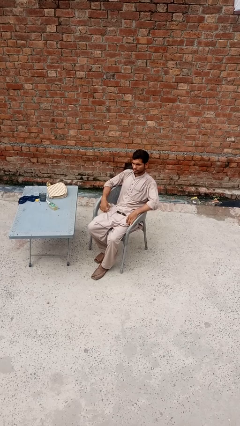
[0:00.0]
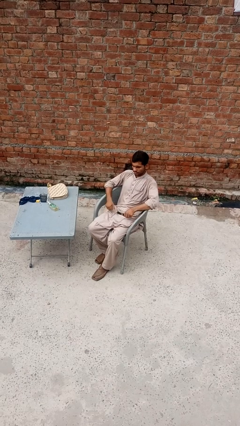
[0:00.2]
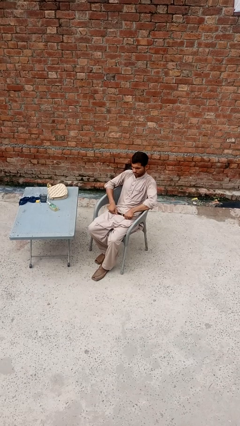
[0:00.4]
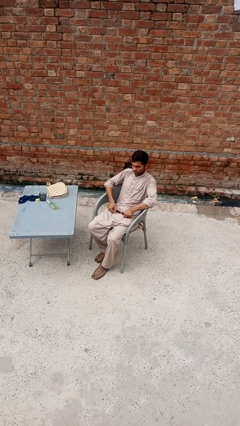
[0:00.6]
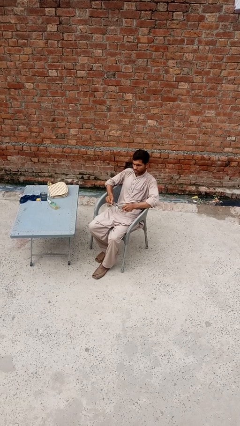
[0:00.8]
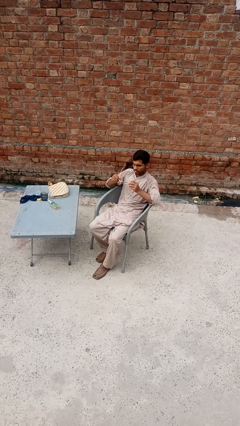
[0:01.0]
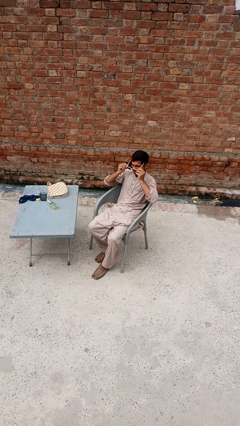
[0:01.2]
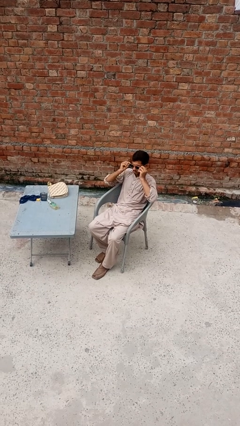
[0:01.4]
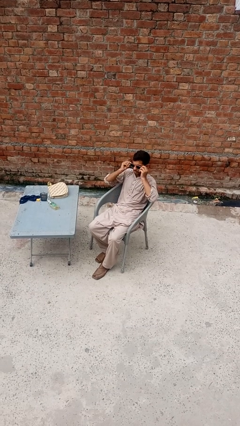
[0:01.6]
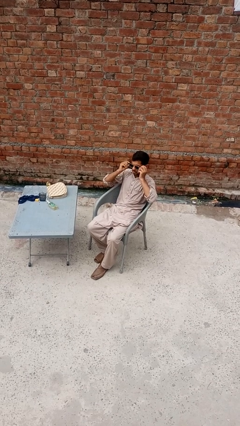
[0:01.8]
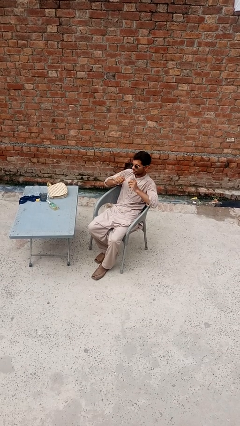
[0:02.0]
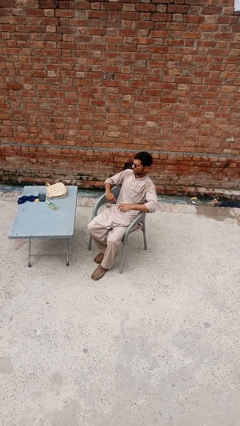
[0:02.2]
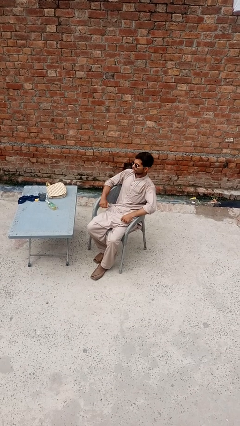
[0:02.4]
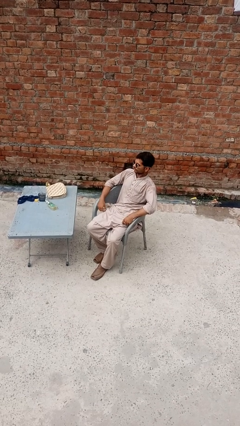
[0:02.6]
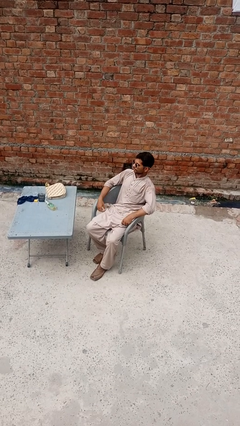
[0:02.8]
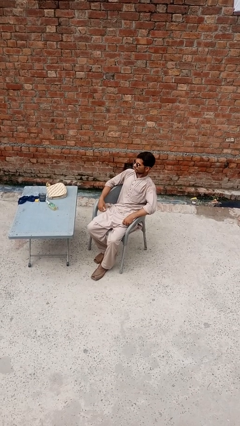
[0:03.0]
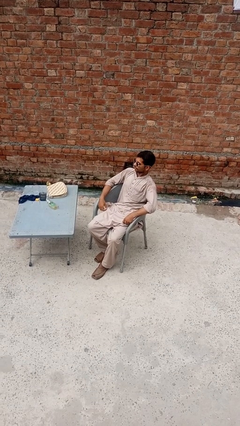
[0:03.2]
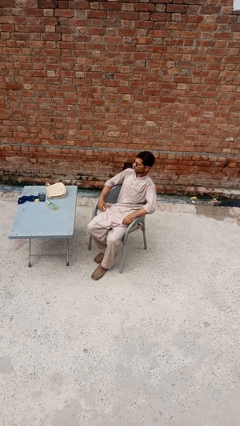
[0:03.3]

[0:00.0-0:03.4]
person puts on sunglasses

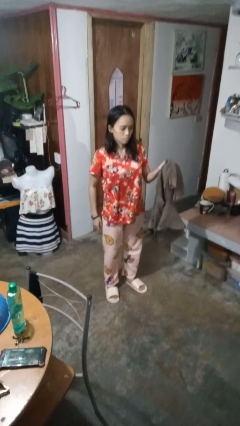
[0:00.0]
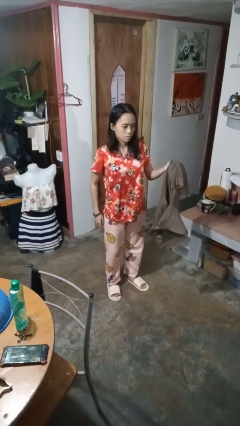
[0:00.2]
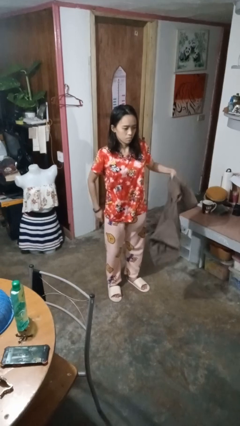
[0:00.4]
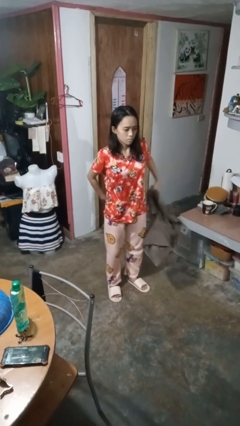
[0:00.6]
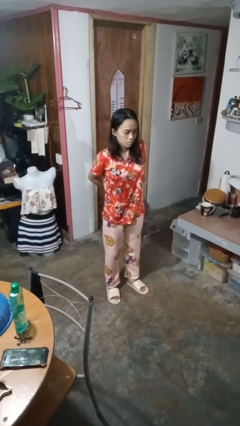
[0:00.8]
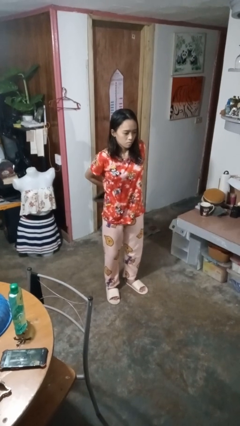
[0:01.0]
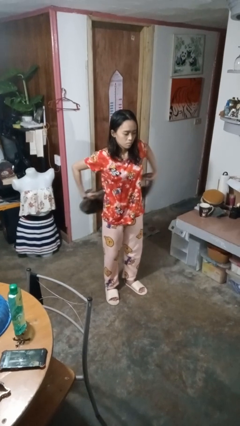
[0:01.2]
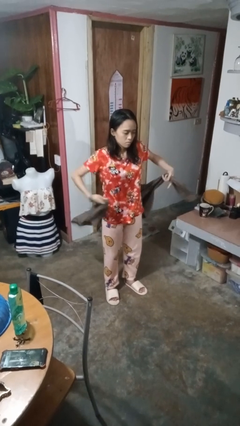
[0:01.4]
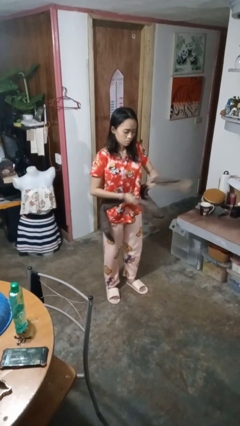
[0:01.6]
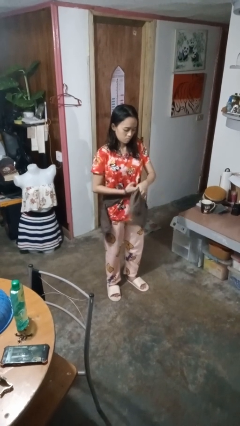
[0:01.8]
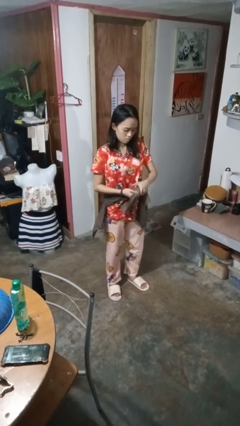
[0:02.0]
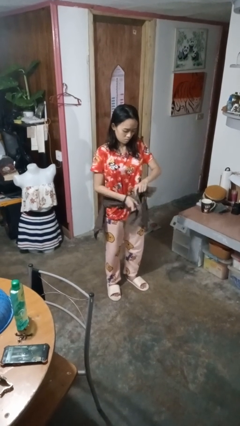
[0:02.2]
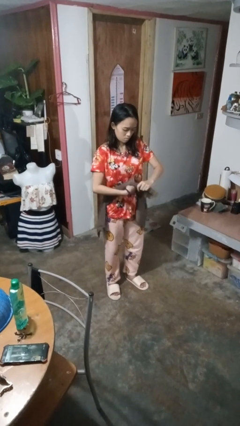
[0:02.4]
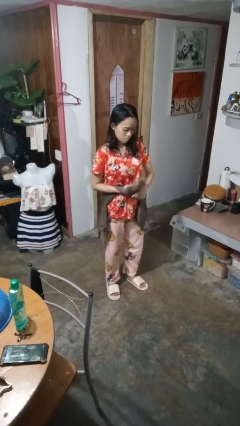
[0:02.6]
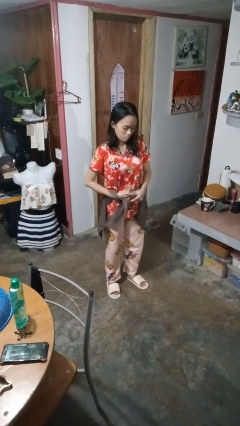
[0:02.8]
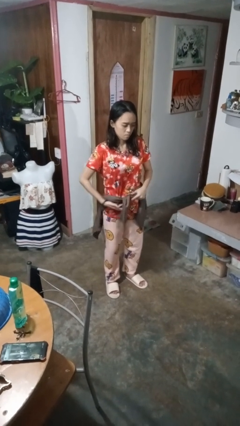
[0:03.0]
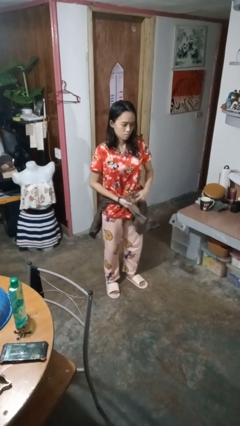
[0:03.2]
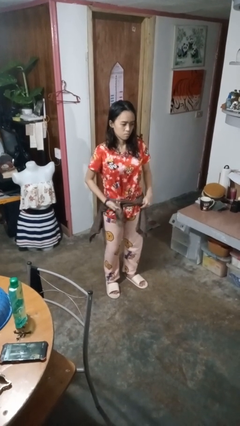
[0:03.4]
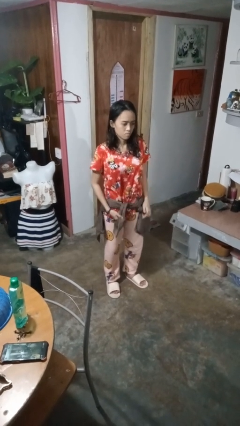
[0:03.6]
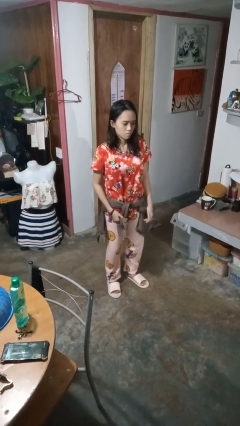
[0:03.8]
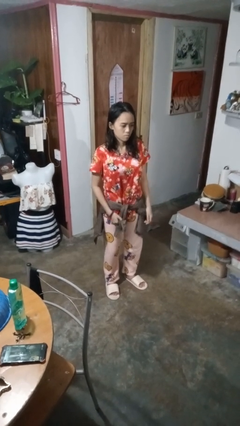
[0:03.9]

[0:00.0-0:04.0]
person ties jacket around waist

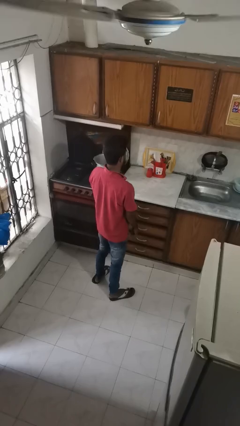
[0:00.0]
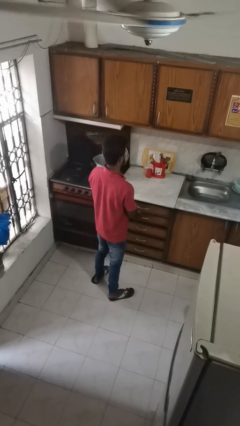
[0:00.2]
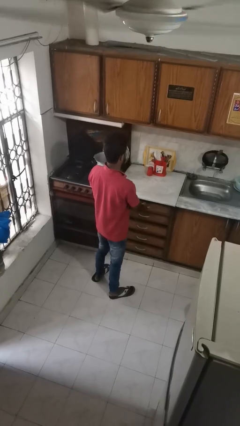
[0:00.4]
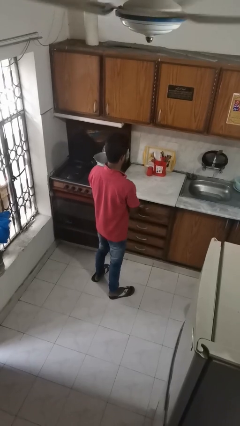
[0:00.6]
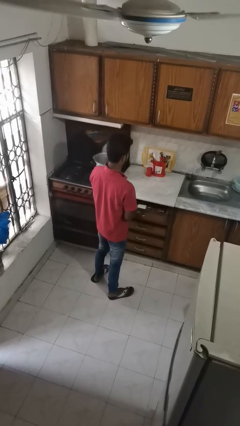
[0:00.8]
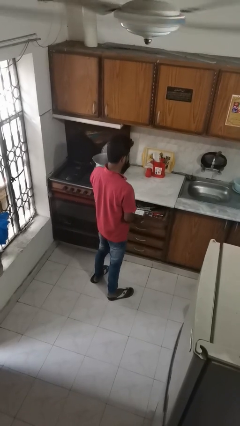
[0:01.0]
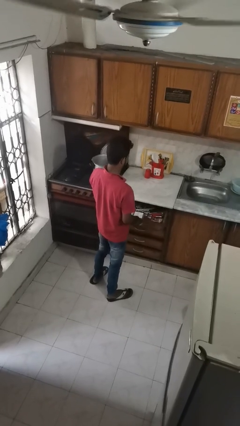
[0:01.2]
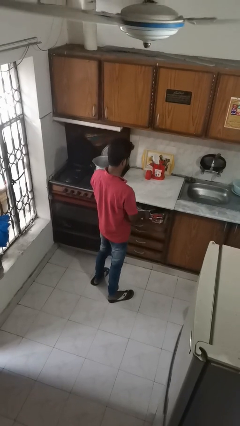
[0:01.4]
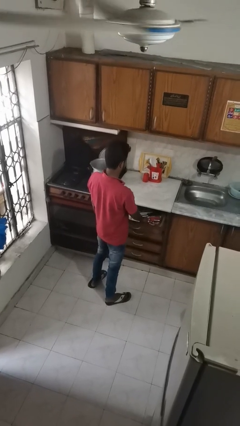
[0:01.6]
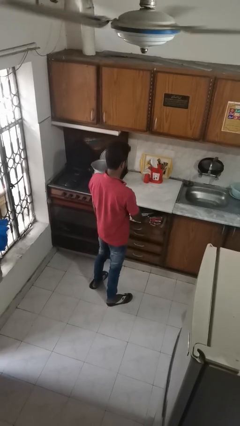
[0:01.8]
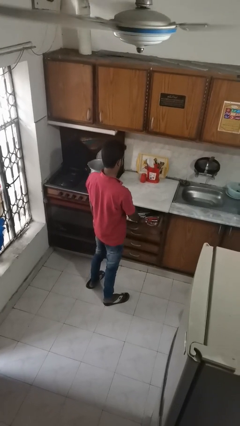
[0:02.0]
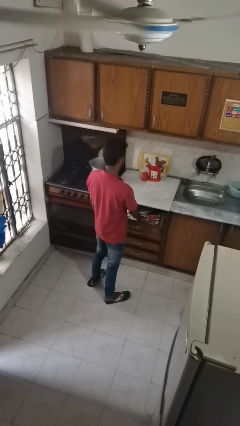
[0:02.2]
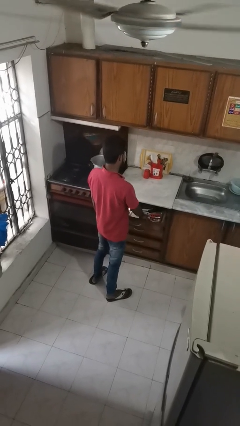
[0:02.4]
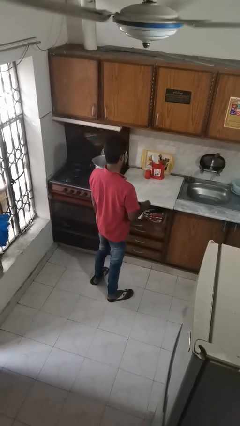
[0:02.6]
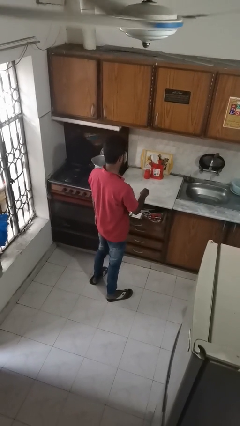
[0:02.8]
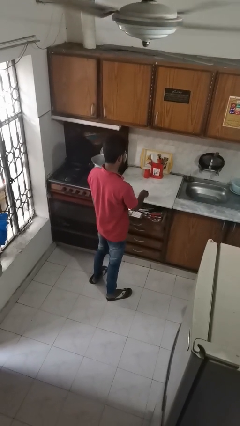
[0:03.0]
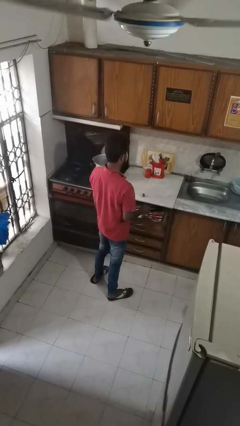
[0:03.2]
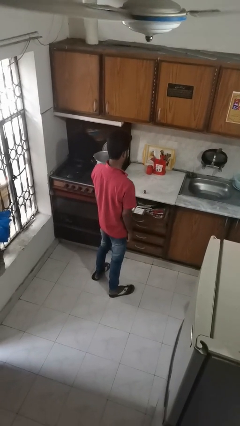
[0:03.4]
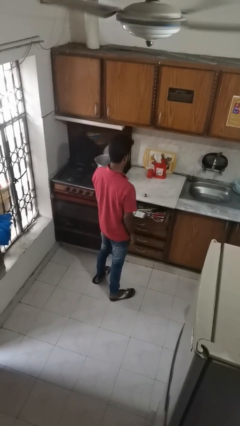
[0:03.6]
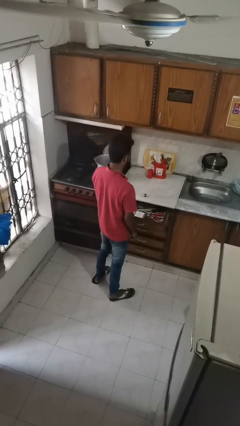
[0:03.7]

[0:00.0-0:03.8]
person takes object from kitchen drawer

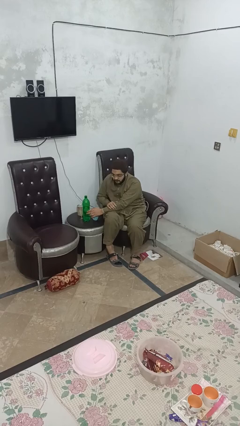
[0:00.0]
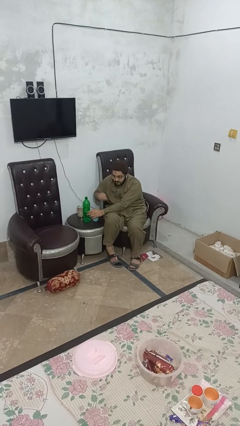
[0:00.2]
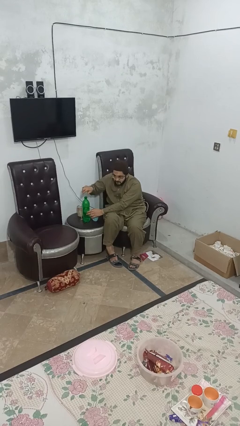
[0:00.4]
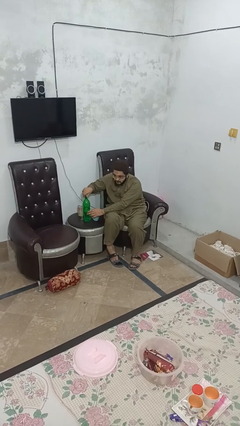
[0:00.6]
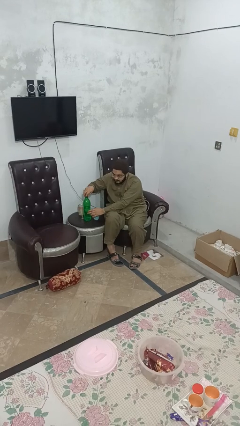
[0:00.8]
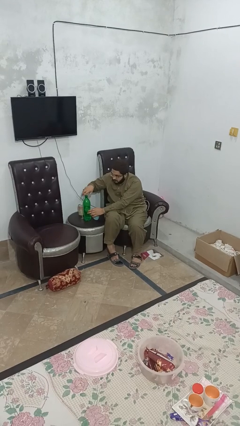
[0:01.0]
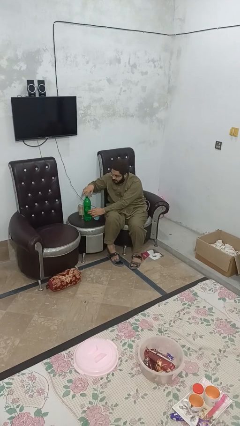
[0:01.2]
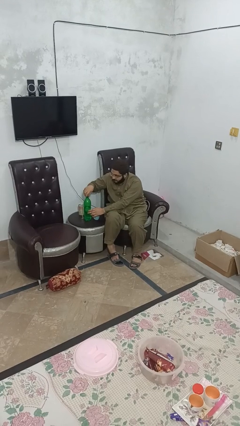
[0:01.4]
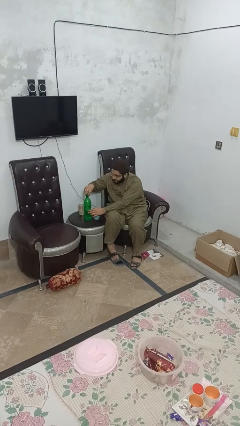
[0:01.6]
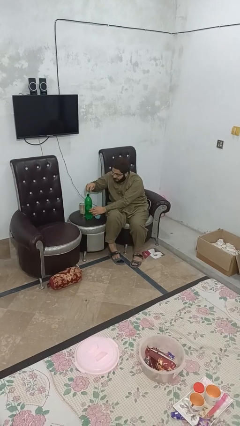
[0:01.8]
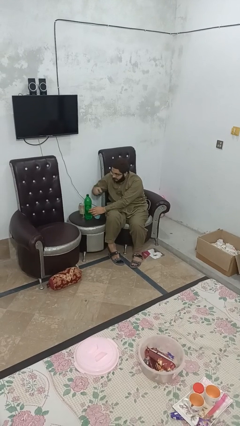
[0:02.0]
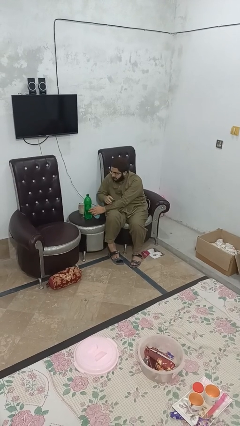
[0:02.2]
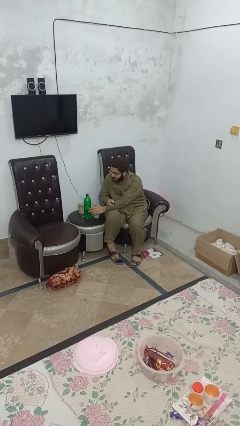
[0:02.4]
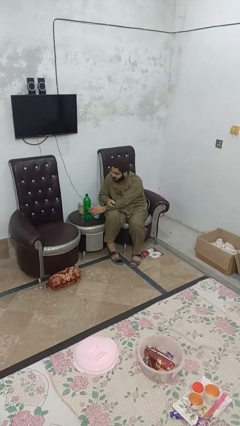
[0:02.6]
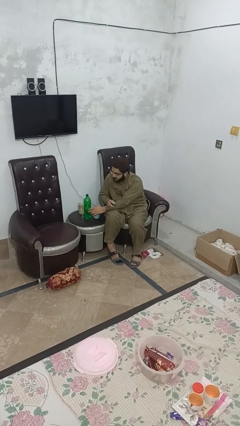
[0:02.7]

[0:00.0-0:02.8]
person unscrews lid from bottle

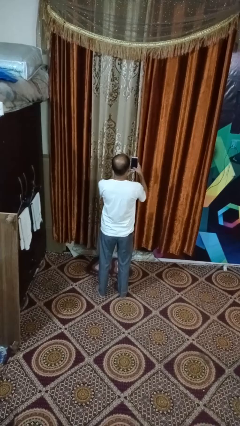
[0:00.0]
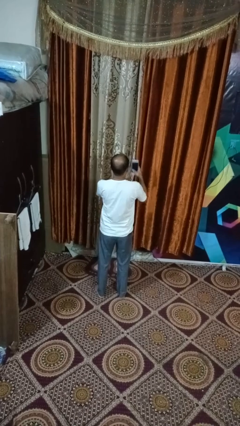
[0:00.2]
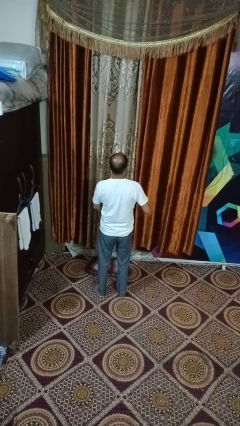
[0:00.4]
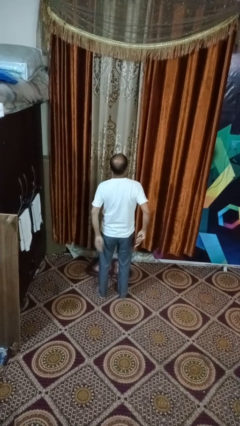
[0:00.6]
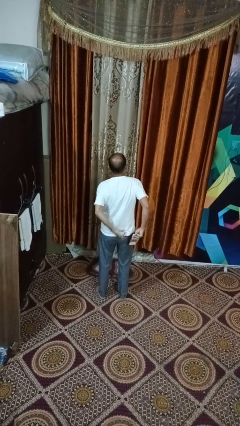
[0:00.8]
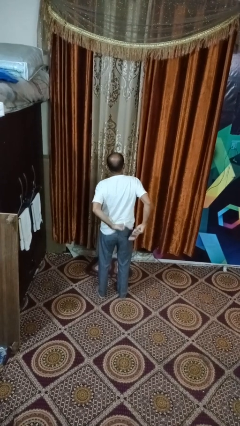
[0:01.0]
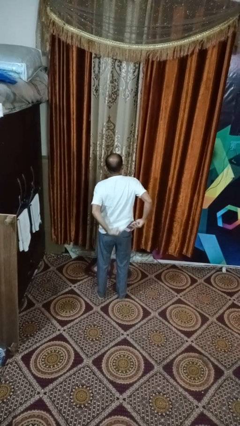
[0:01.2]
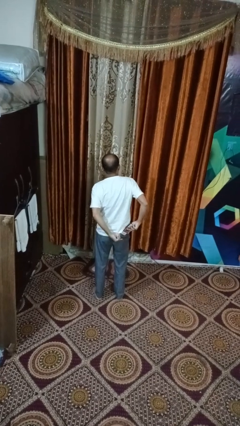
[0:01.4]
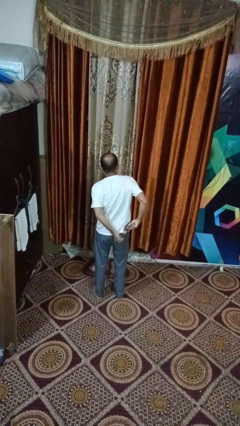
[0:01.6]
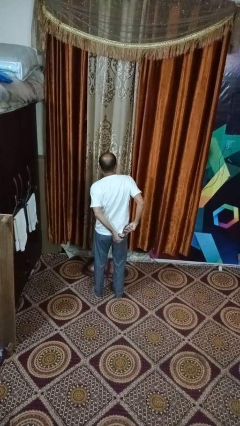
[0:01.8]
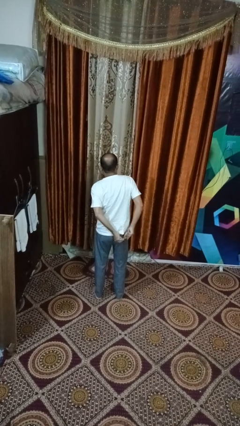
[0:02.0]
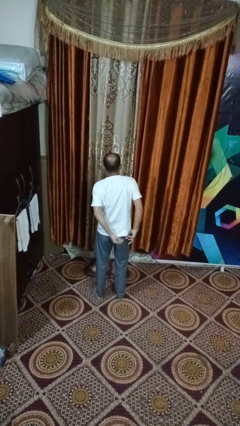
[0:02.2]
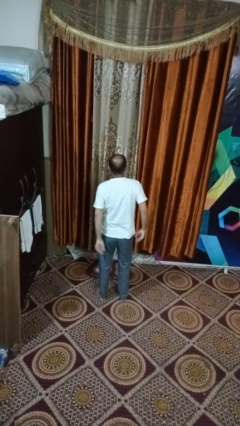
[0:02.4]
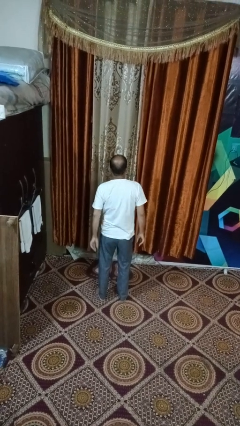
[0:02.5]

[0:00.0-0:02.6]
person puts phone into pocket

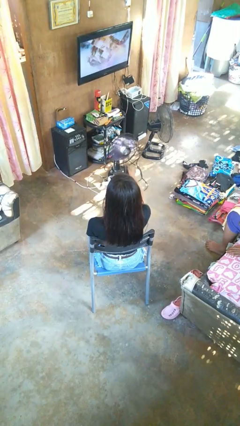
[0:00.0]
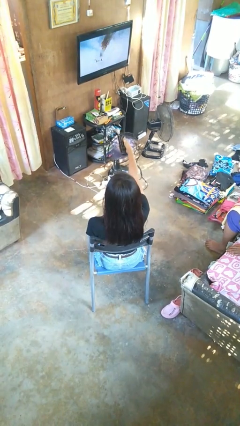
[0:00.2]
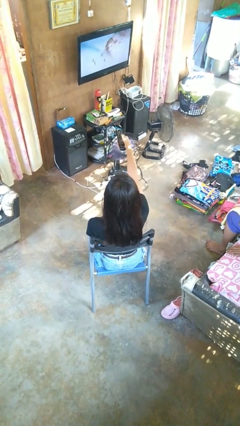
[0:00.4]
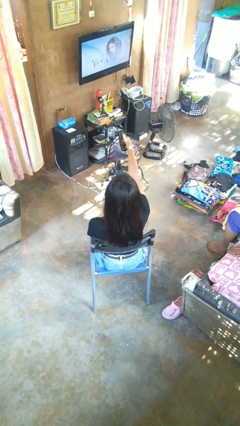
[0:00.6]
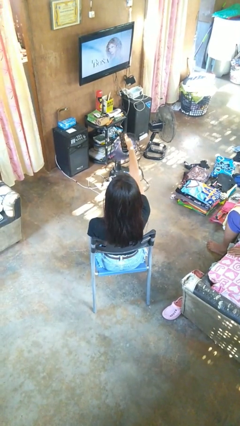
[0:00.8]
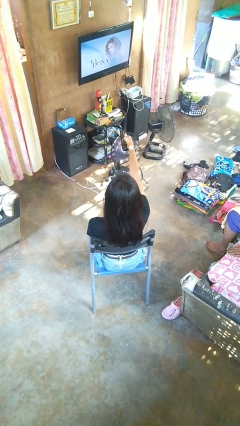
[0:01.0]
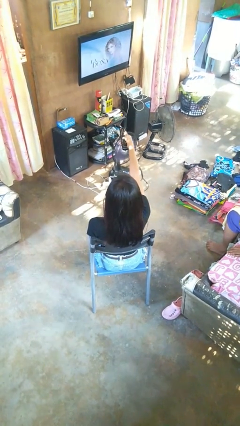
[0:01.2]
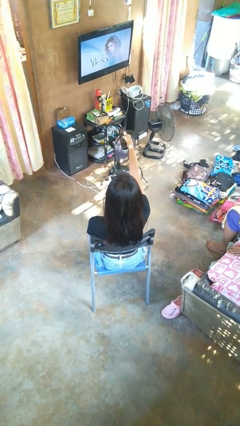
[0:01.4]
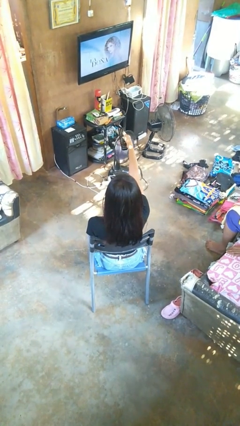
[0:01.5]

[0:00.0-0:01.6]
person uses television remote
